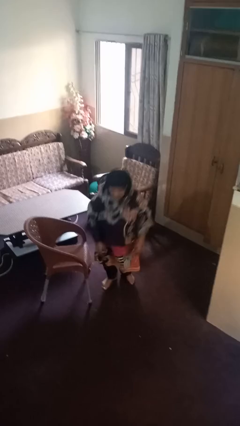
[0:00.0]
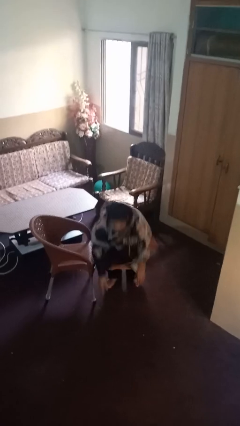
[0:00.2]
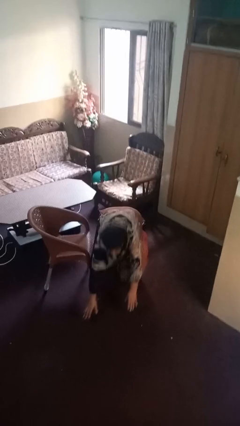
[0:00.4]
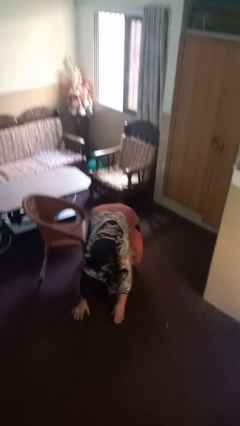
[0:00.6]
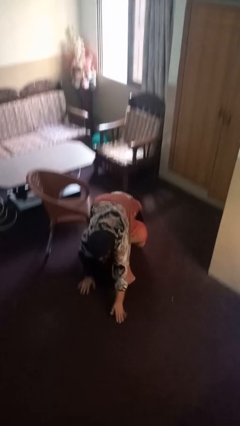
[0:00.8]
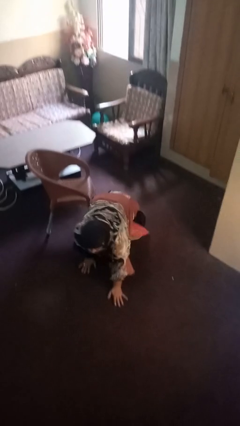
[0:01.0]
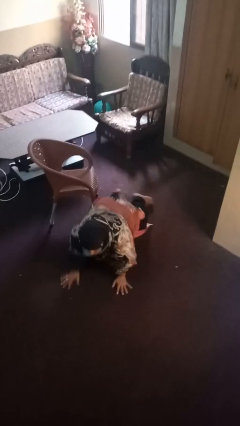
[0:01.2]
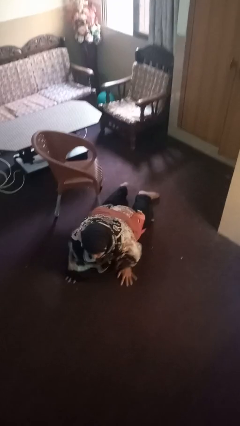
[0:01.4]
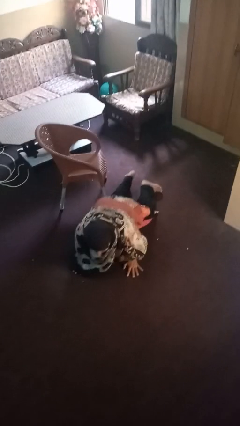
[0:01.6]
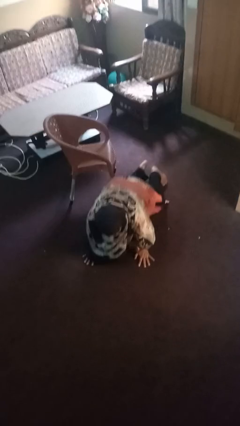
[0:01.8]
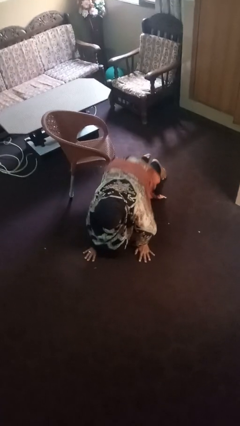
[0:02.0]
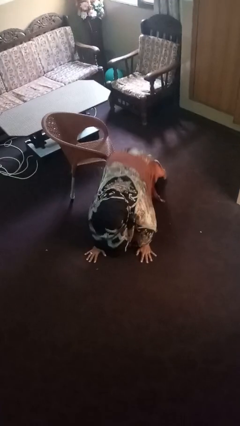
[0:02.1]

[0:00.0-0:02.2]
person lies down on floor

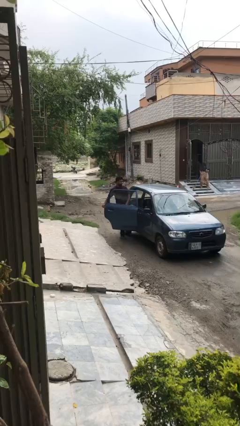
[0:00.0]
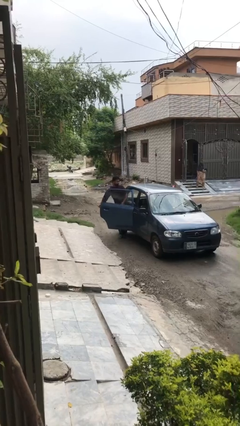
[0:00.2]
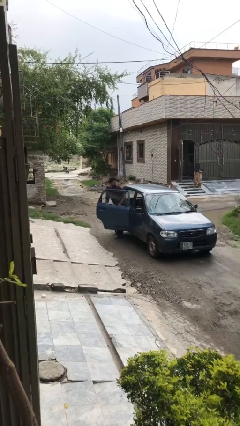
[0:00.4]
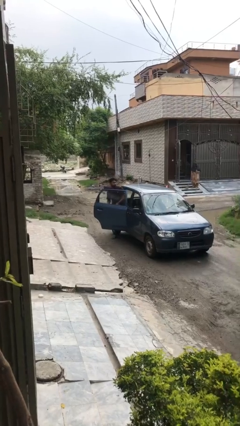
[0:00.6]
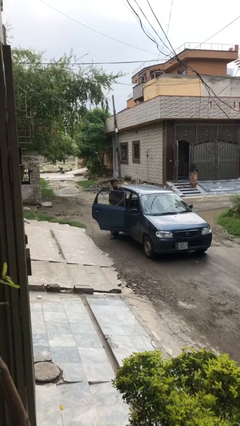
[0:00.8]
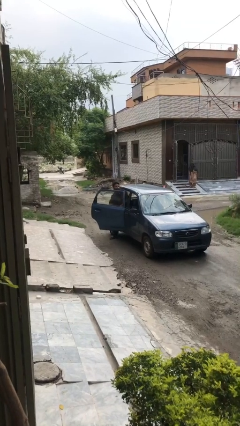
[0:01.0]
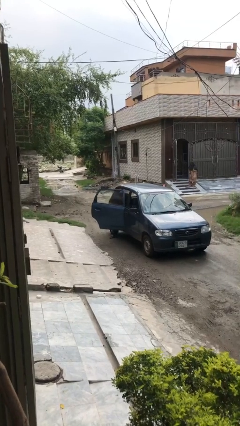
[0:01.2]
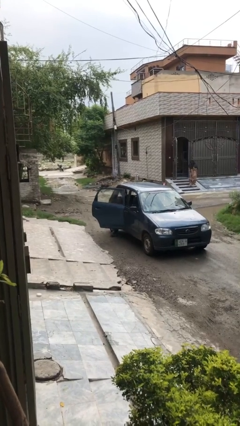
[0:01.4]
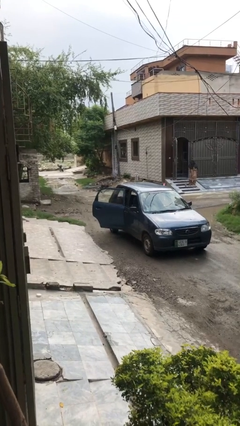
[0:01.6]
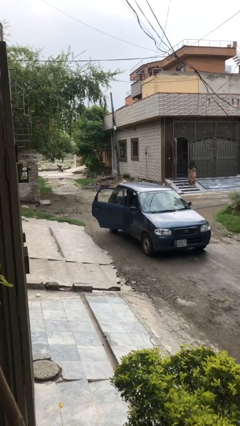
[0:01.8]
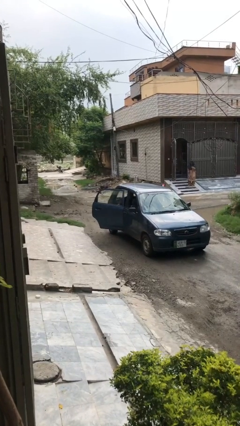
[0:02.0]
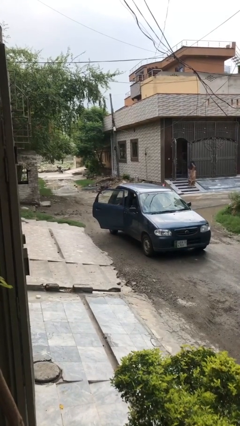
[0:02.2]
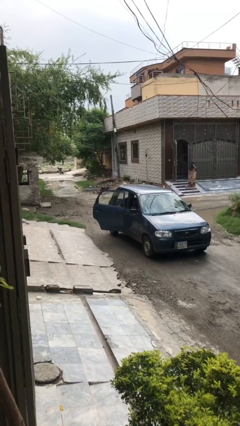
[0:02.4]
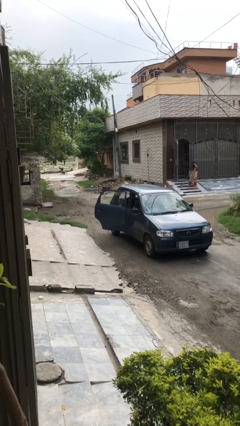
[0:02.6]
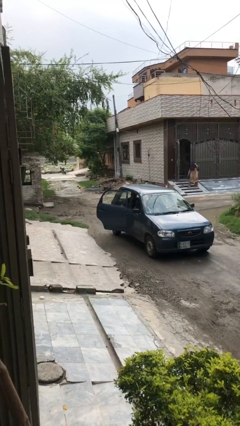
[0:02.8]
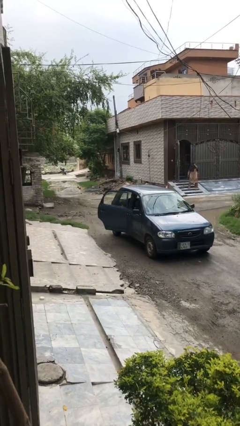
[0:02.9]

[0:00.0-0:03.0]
person enters car

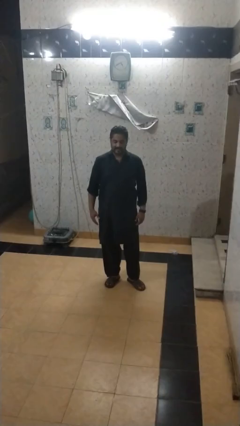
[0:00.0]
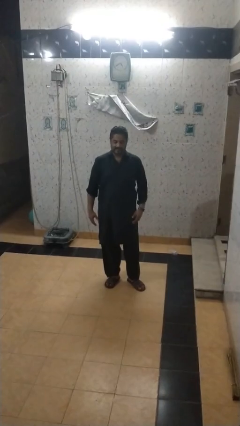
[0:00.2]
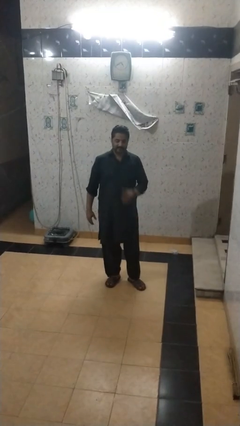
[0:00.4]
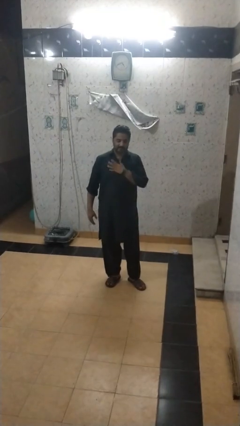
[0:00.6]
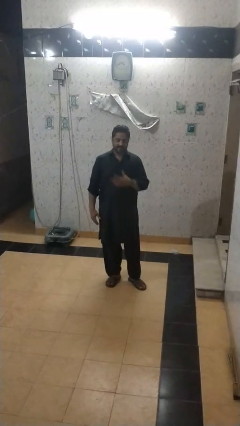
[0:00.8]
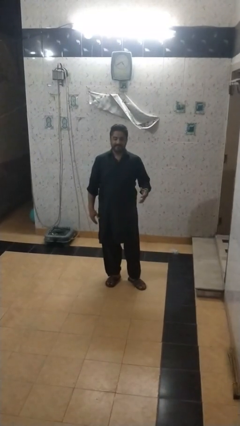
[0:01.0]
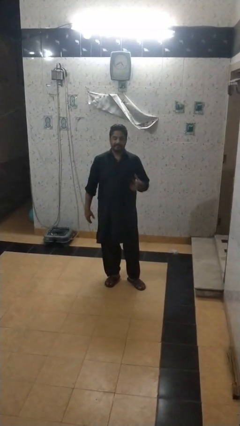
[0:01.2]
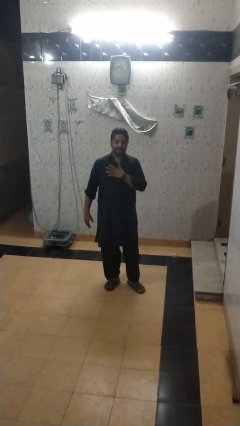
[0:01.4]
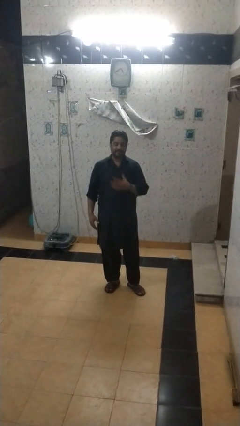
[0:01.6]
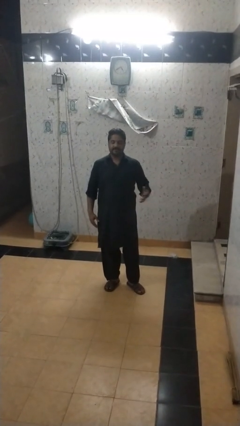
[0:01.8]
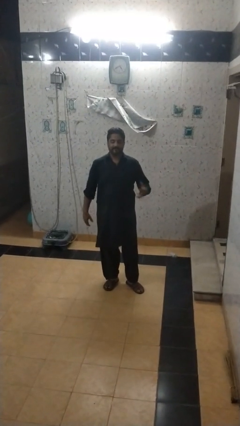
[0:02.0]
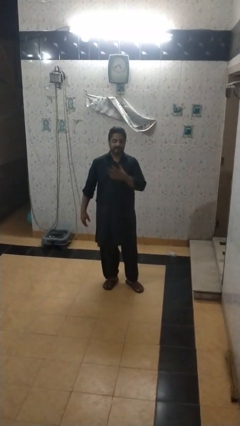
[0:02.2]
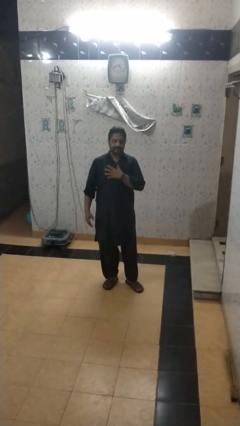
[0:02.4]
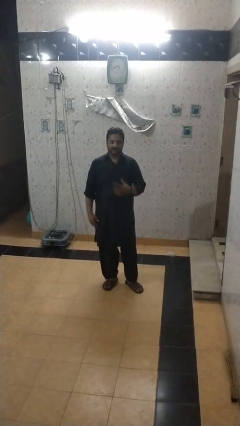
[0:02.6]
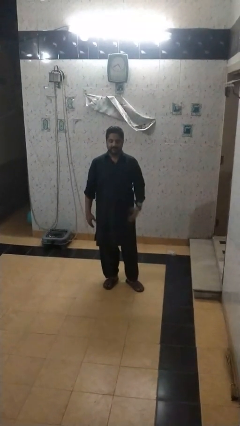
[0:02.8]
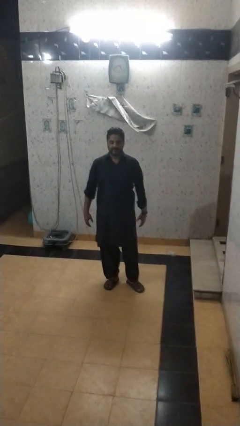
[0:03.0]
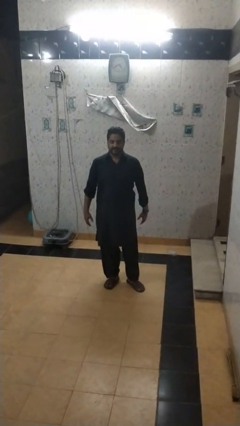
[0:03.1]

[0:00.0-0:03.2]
person drums on chest

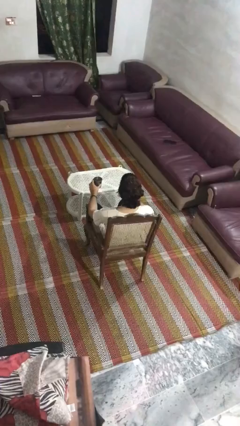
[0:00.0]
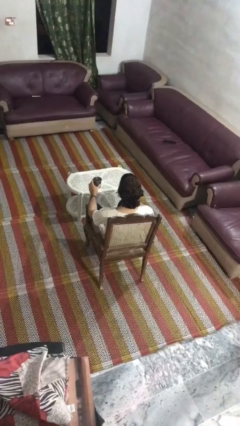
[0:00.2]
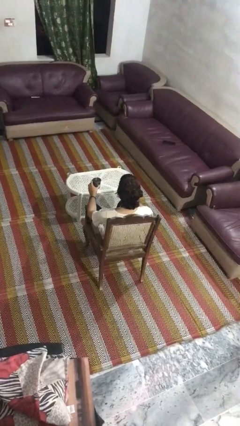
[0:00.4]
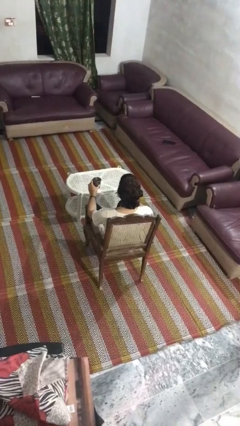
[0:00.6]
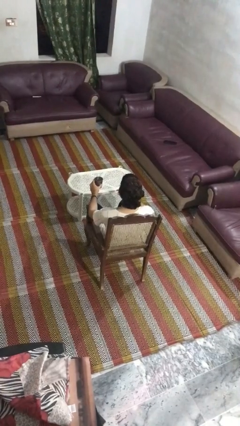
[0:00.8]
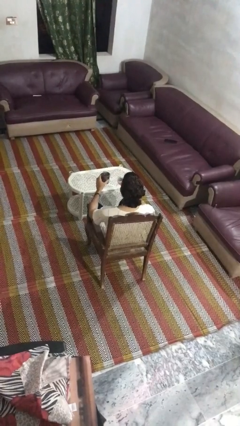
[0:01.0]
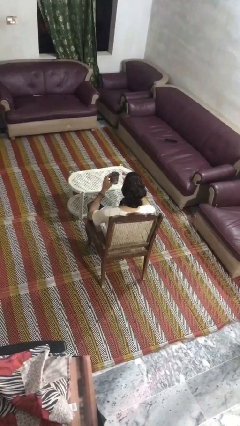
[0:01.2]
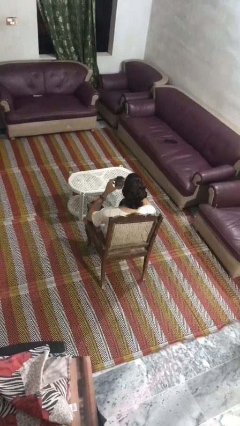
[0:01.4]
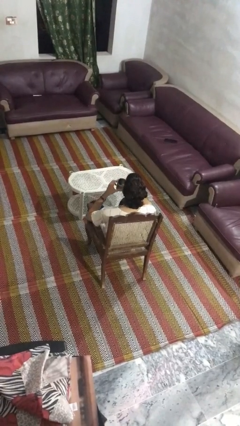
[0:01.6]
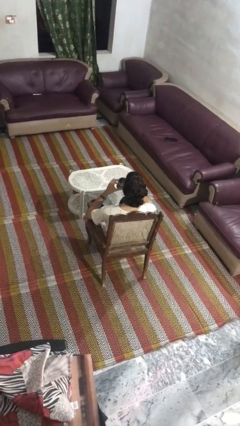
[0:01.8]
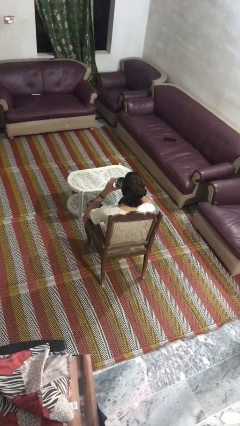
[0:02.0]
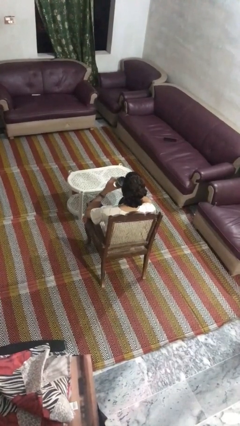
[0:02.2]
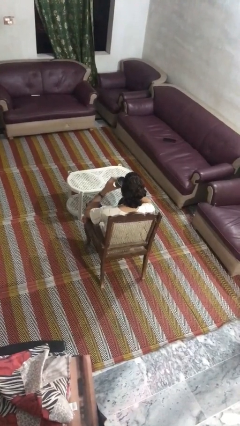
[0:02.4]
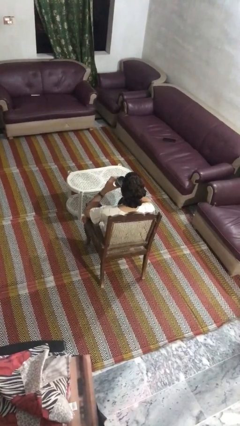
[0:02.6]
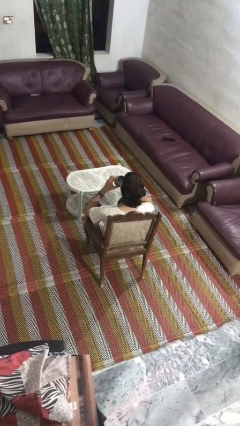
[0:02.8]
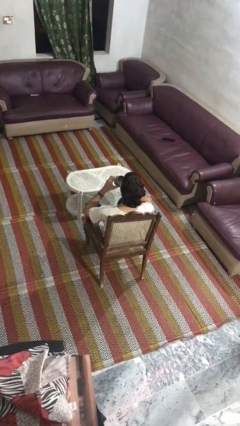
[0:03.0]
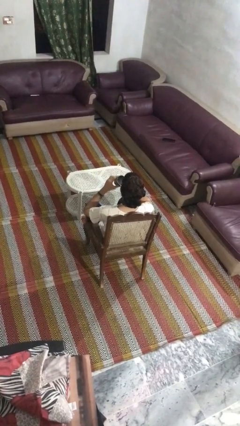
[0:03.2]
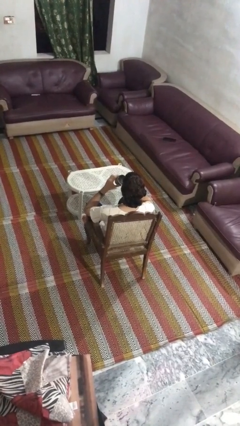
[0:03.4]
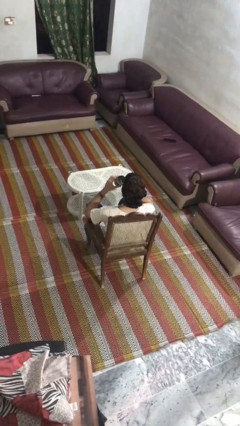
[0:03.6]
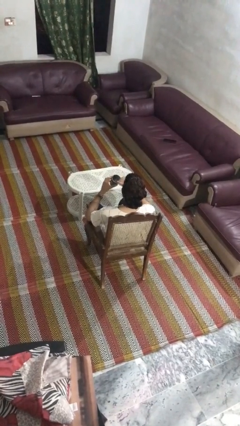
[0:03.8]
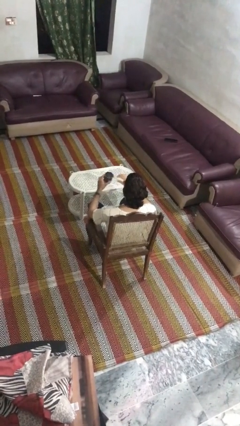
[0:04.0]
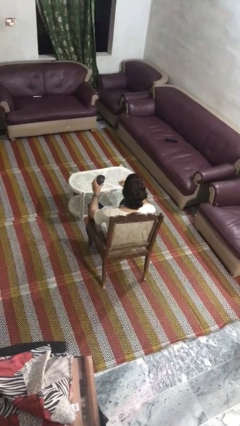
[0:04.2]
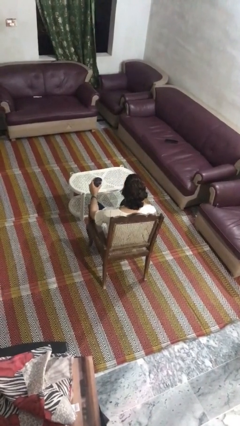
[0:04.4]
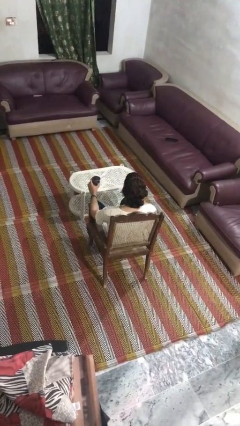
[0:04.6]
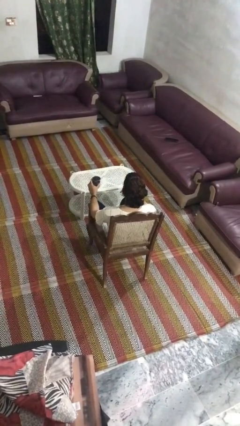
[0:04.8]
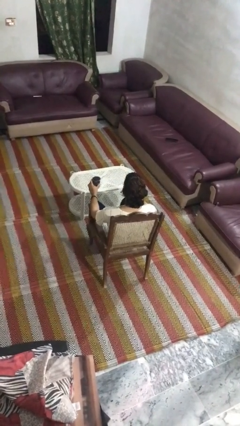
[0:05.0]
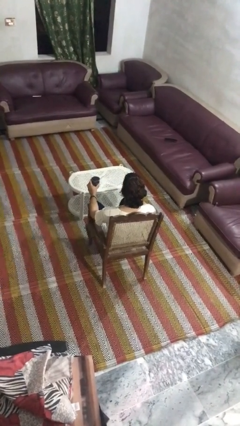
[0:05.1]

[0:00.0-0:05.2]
person drinks from straw

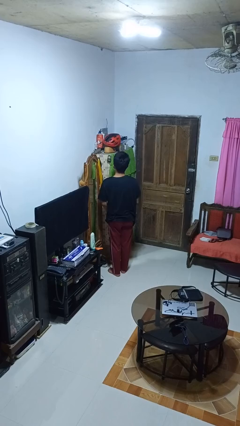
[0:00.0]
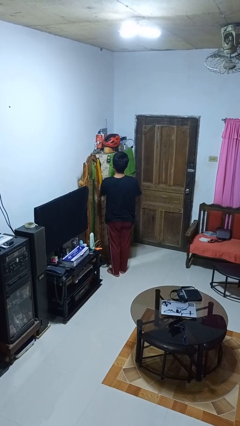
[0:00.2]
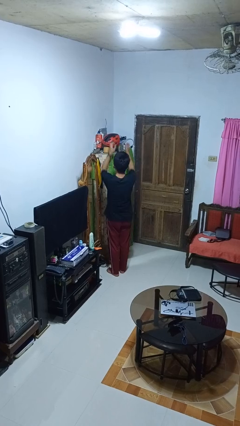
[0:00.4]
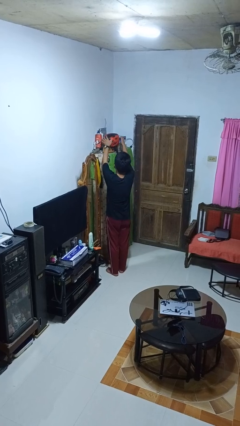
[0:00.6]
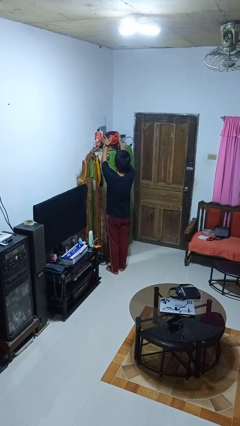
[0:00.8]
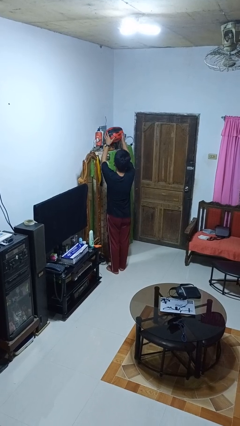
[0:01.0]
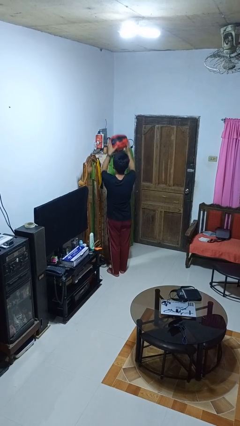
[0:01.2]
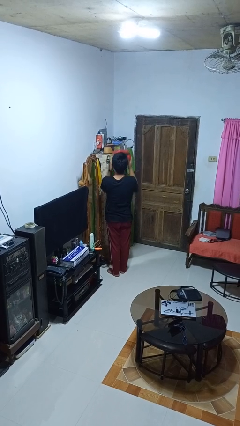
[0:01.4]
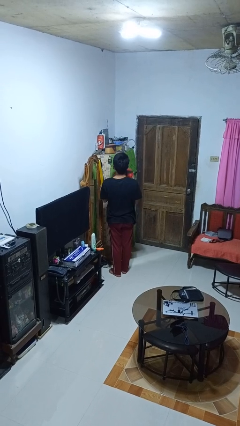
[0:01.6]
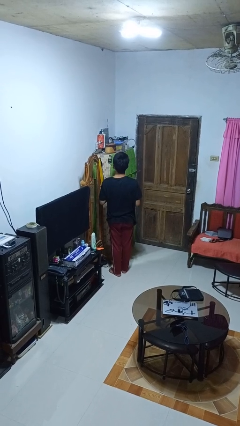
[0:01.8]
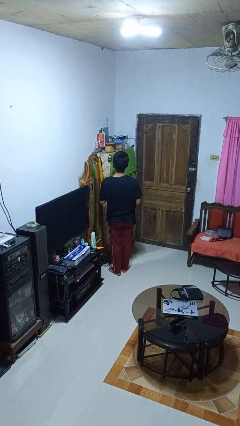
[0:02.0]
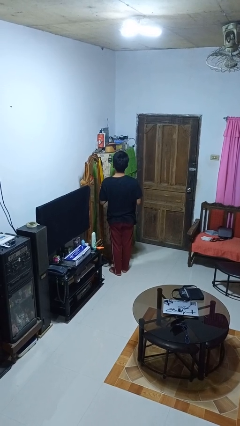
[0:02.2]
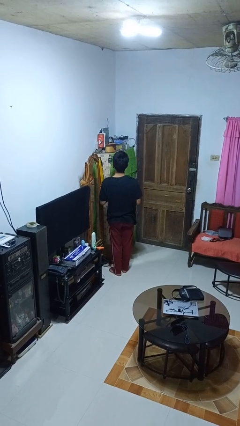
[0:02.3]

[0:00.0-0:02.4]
person picks up object from shelf

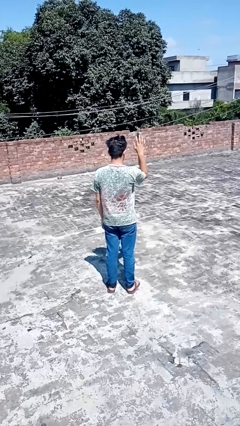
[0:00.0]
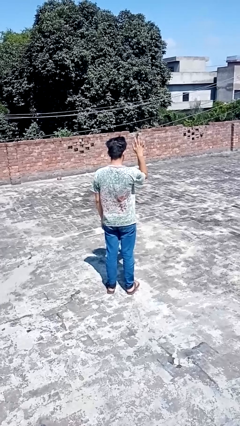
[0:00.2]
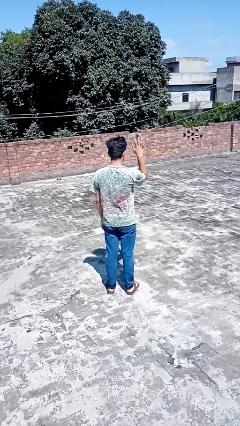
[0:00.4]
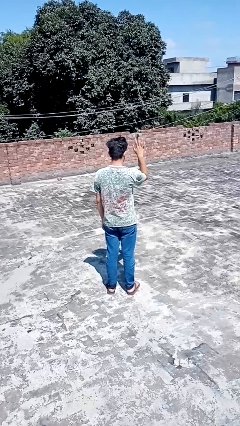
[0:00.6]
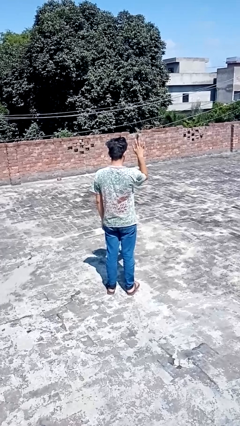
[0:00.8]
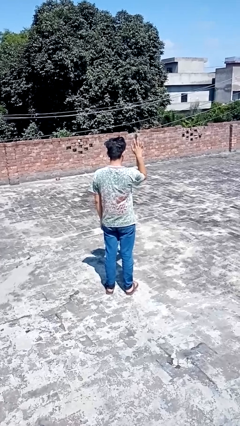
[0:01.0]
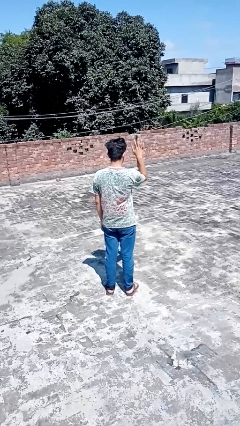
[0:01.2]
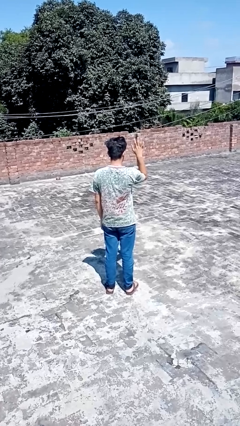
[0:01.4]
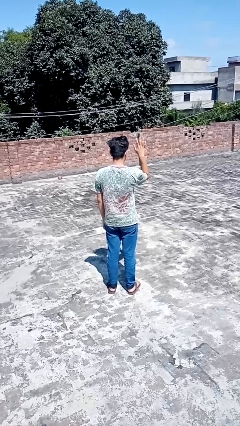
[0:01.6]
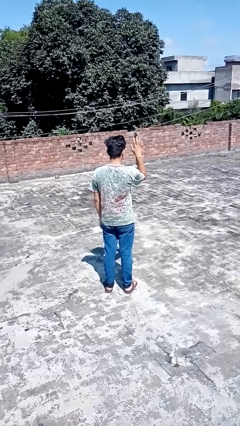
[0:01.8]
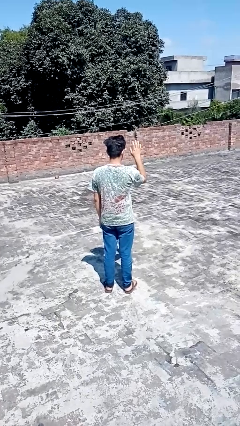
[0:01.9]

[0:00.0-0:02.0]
person gestures number five
